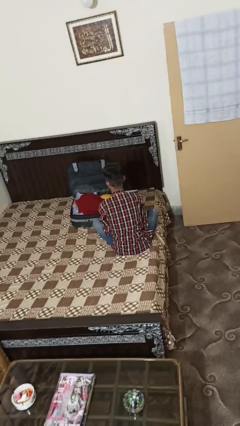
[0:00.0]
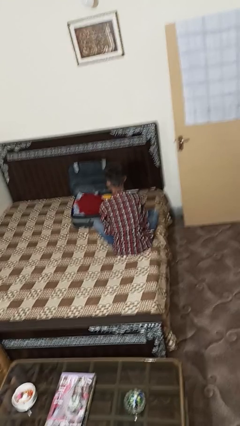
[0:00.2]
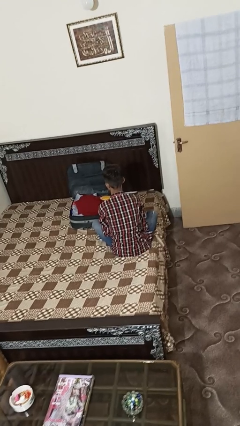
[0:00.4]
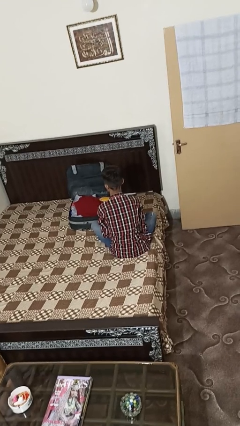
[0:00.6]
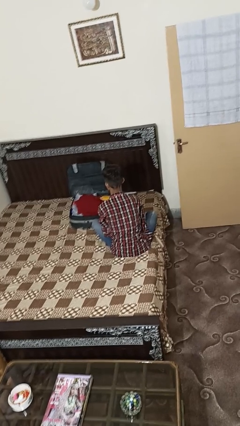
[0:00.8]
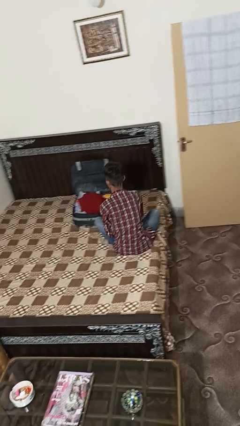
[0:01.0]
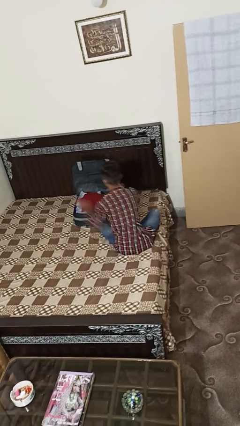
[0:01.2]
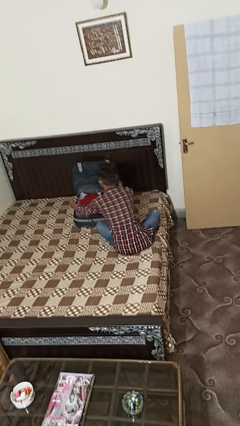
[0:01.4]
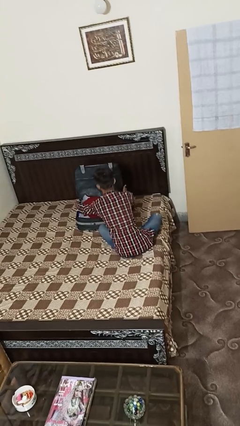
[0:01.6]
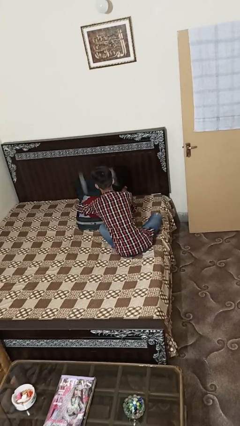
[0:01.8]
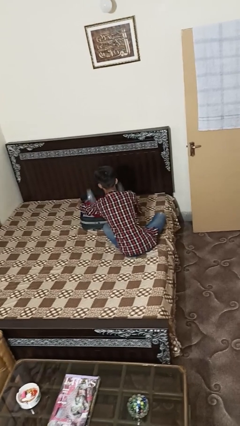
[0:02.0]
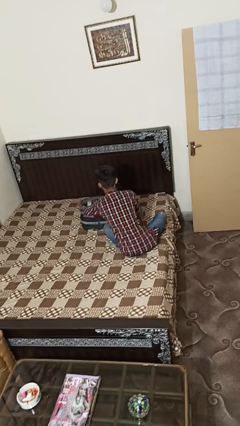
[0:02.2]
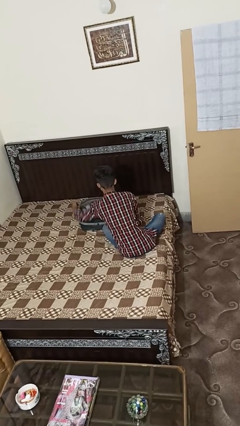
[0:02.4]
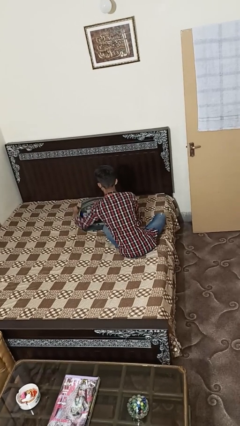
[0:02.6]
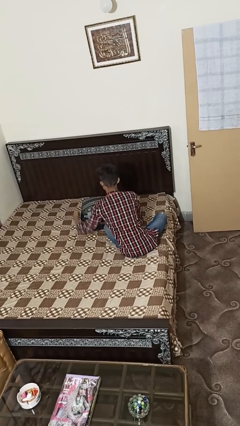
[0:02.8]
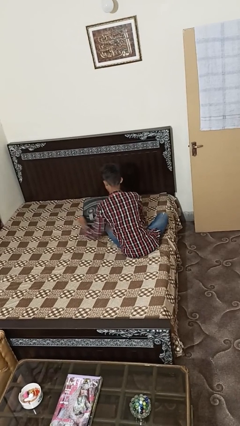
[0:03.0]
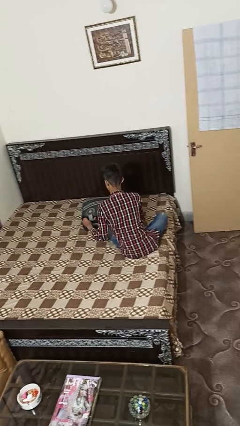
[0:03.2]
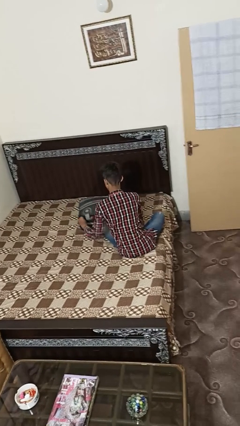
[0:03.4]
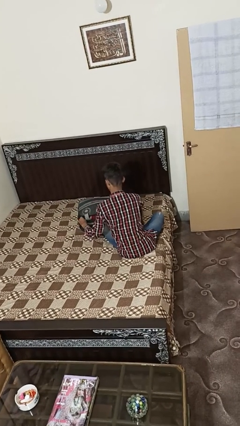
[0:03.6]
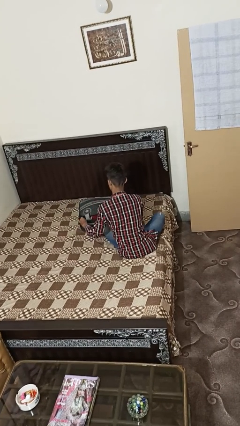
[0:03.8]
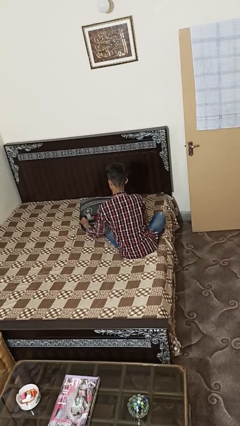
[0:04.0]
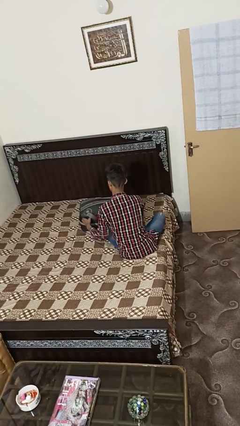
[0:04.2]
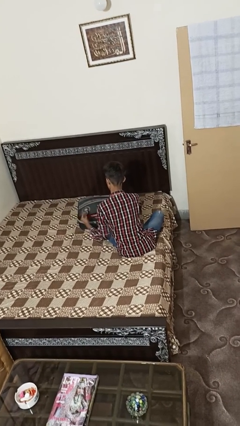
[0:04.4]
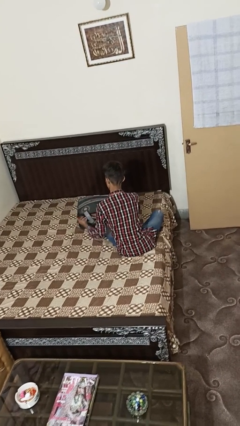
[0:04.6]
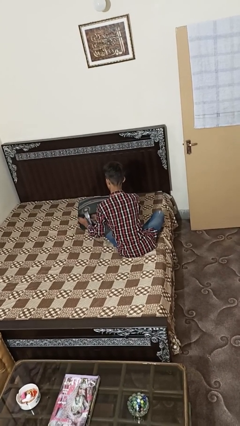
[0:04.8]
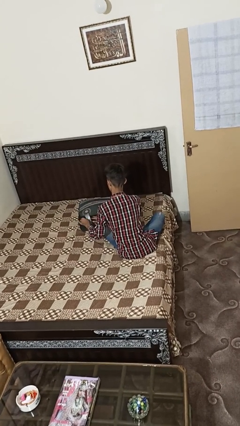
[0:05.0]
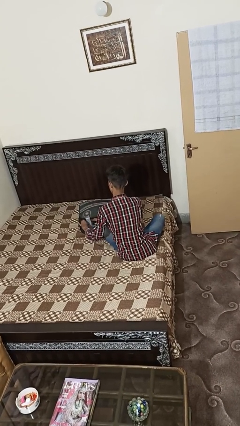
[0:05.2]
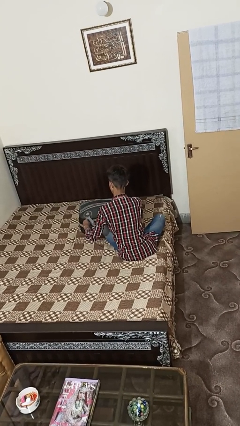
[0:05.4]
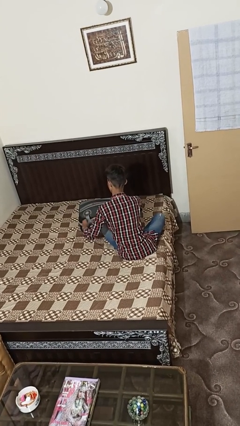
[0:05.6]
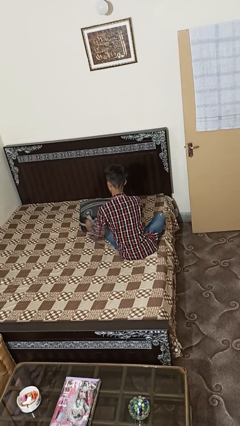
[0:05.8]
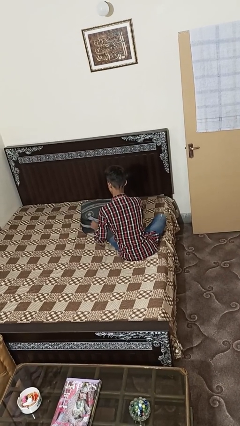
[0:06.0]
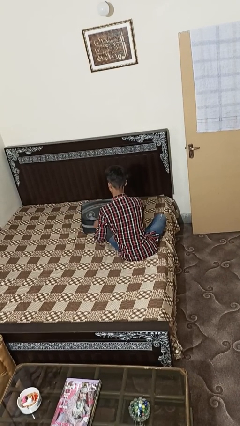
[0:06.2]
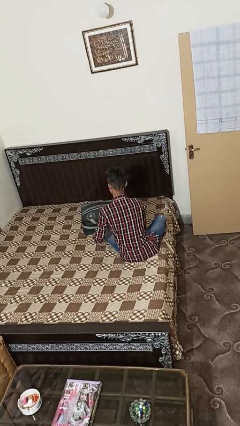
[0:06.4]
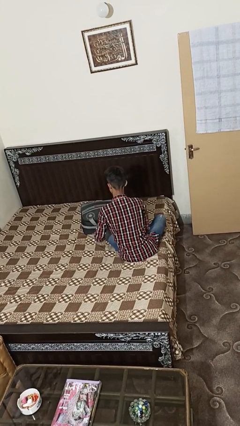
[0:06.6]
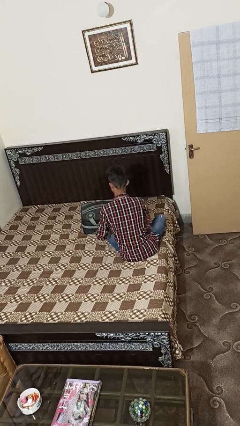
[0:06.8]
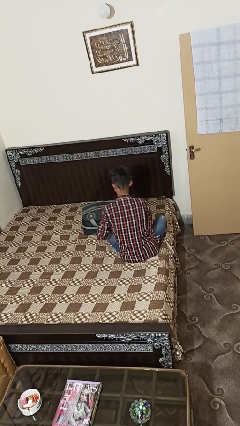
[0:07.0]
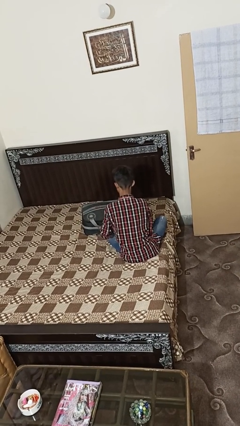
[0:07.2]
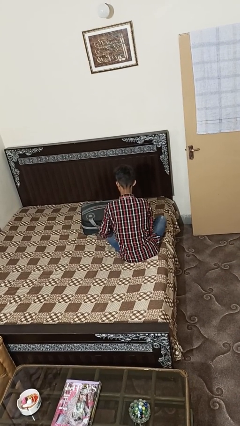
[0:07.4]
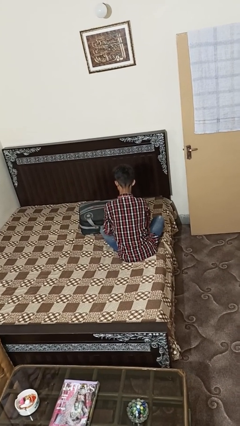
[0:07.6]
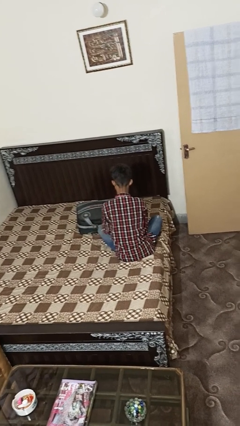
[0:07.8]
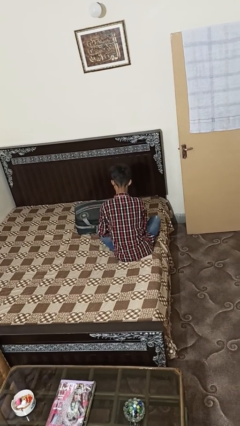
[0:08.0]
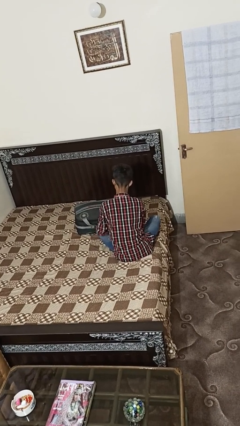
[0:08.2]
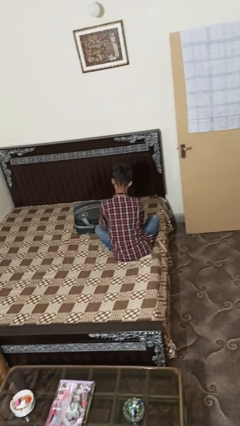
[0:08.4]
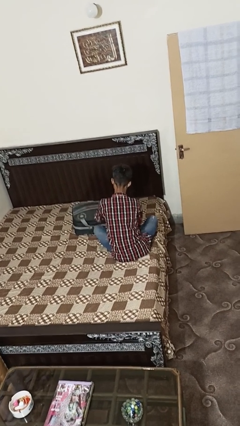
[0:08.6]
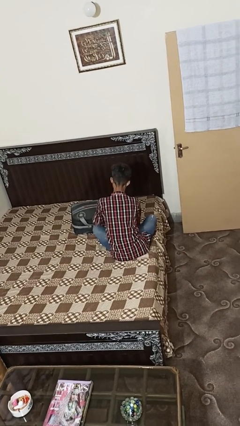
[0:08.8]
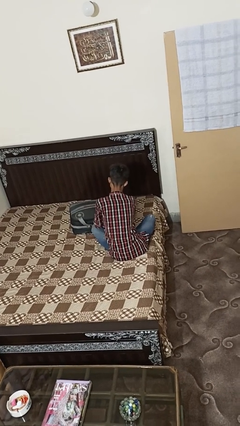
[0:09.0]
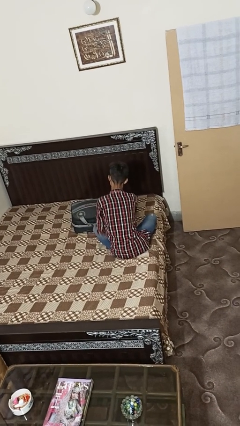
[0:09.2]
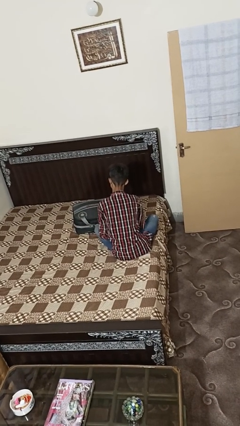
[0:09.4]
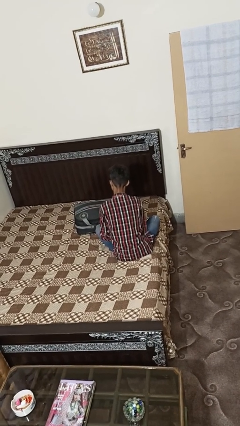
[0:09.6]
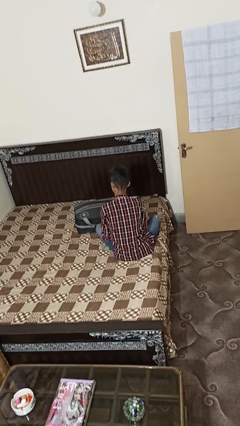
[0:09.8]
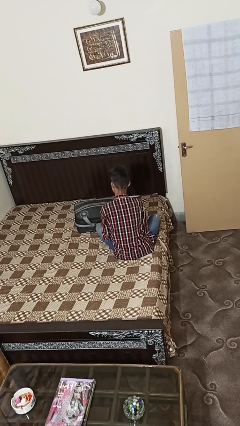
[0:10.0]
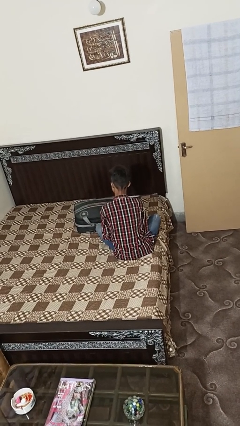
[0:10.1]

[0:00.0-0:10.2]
person closes suitcase

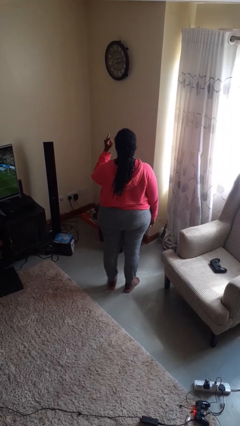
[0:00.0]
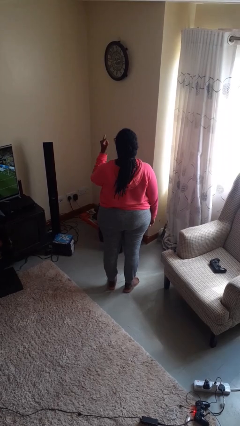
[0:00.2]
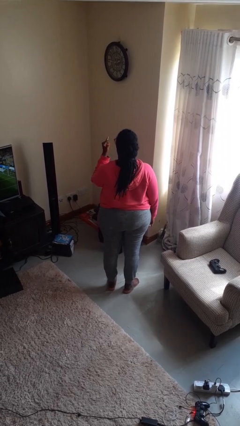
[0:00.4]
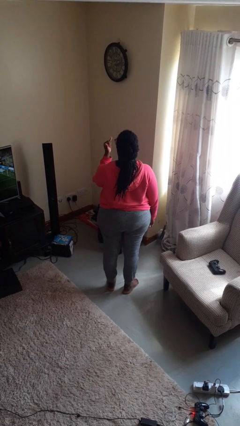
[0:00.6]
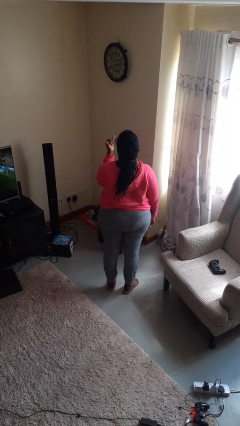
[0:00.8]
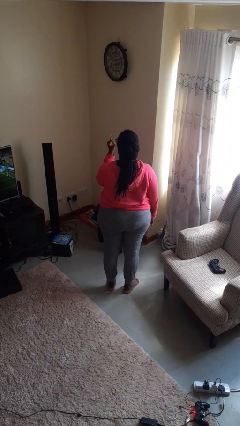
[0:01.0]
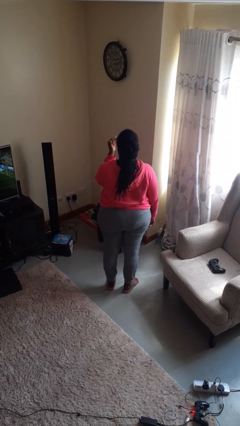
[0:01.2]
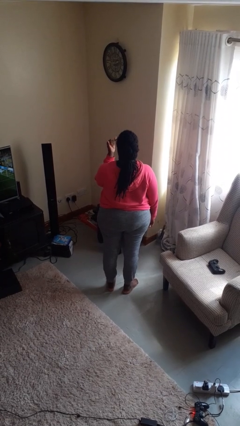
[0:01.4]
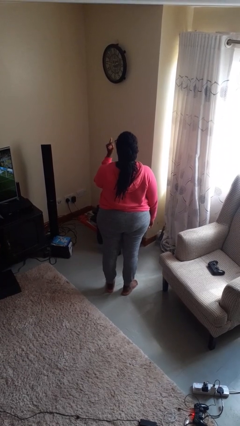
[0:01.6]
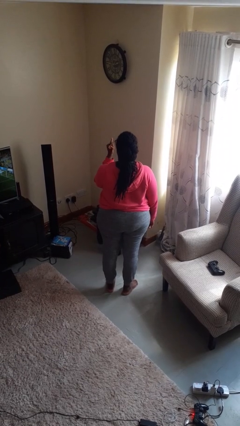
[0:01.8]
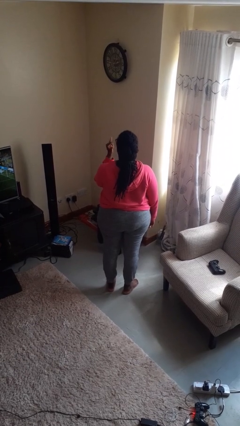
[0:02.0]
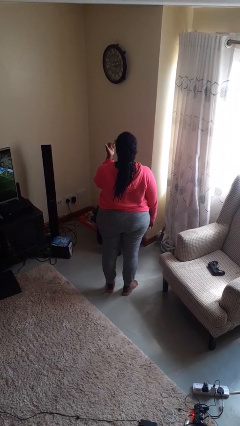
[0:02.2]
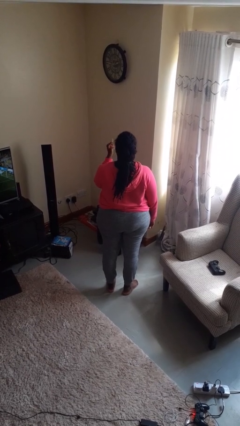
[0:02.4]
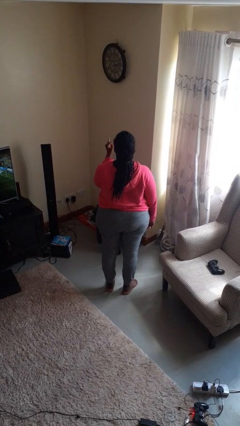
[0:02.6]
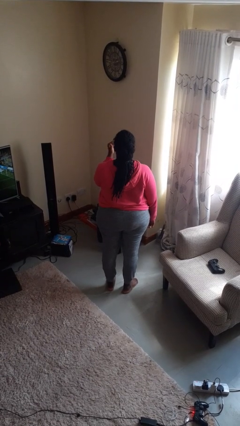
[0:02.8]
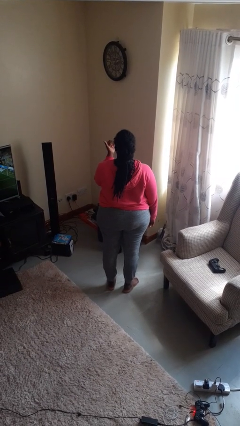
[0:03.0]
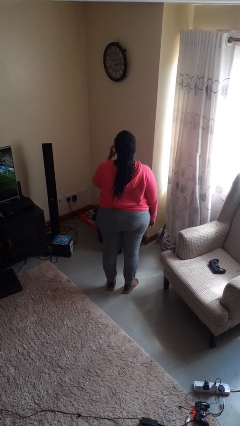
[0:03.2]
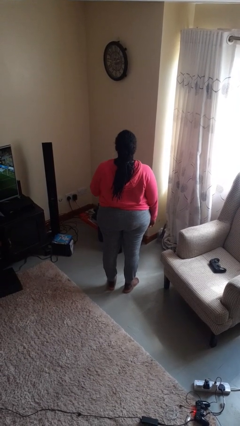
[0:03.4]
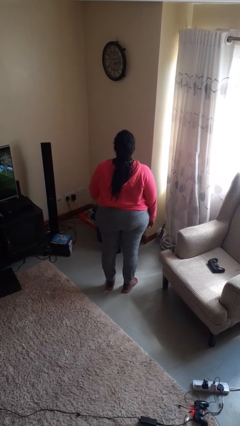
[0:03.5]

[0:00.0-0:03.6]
person gestures hang loose

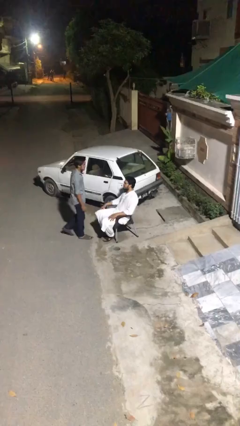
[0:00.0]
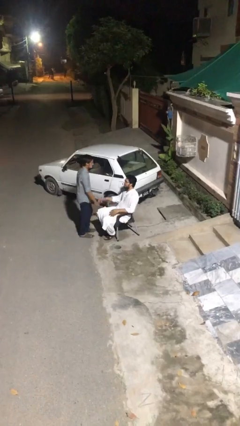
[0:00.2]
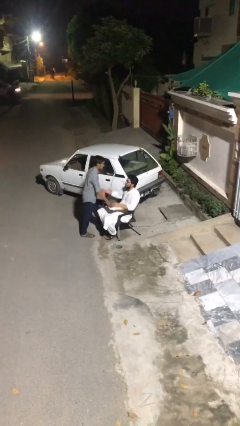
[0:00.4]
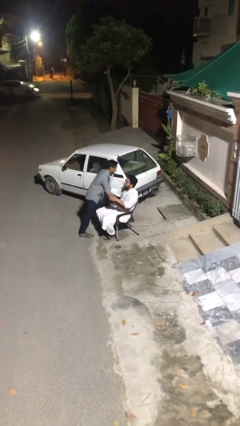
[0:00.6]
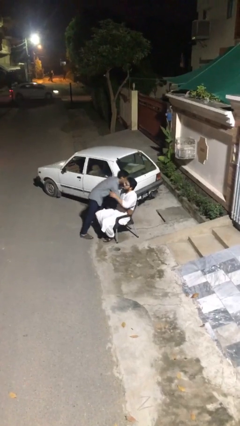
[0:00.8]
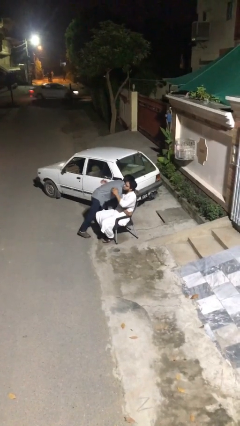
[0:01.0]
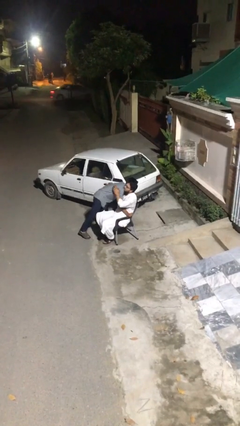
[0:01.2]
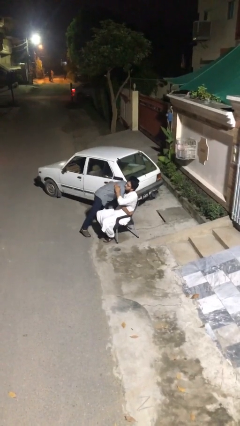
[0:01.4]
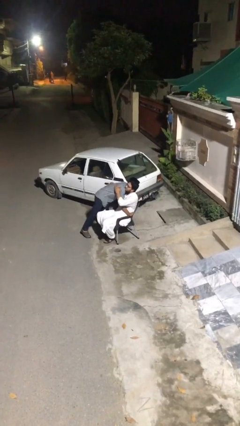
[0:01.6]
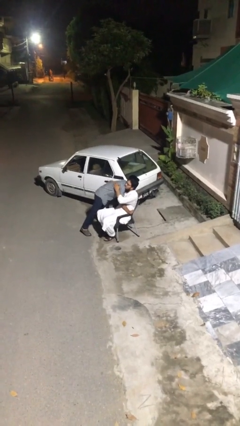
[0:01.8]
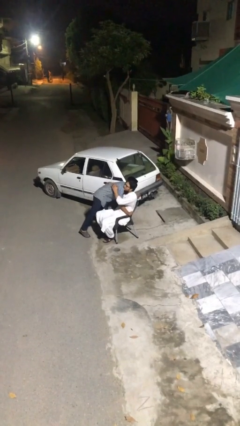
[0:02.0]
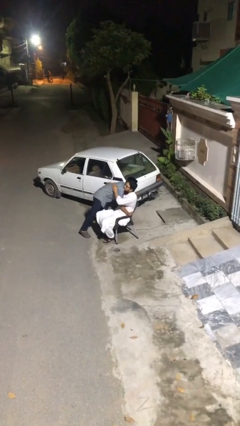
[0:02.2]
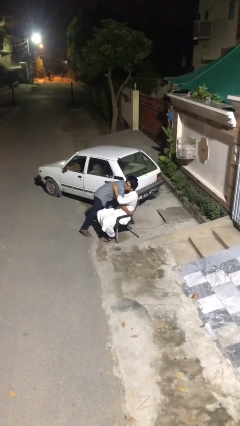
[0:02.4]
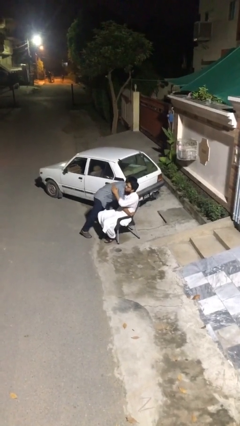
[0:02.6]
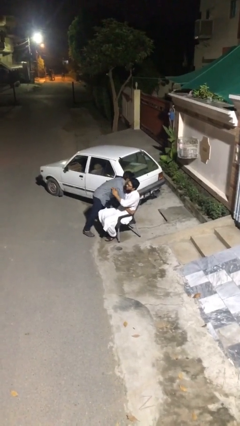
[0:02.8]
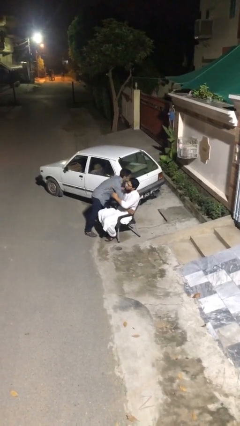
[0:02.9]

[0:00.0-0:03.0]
person embraces person

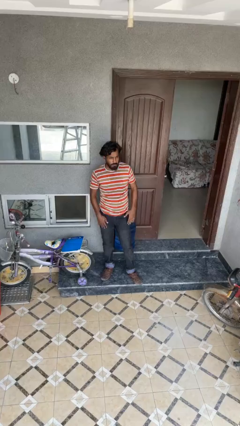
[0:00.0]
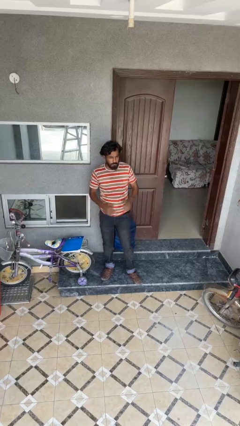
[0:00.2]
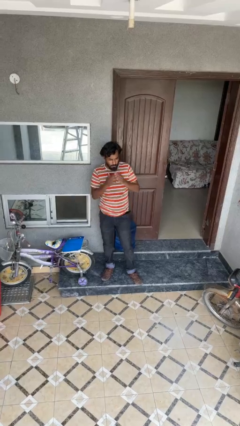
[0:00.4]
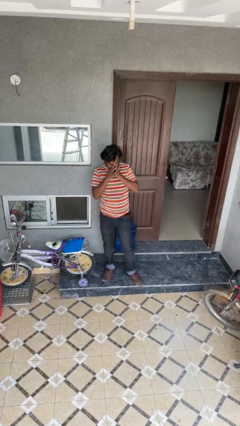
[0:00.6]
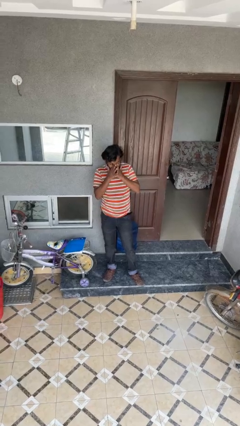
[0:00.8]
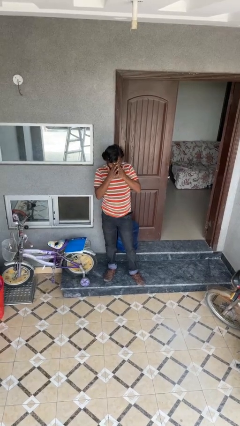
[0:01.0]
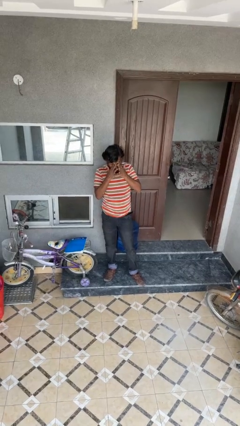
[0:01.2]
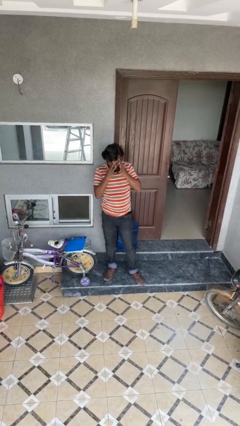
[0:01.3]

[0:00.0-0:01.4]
person scratches face
